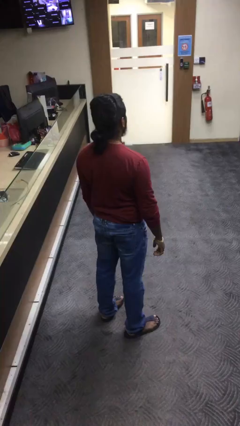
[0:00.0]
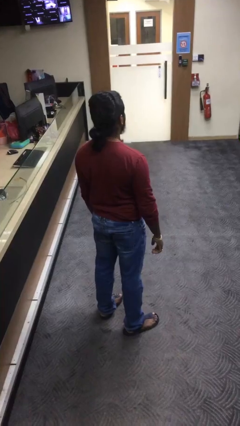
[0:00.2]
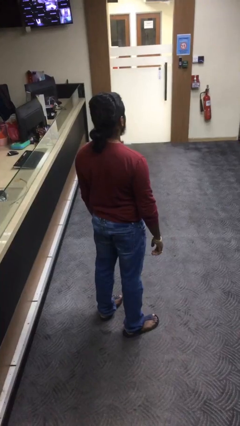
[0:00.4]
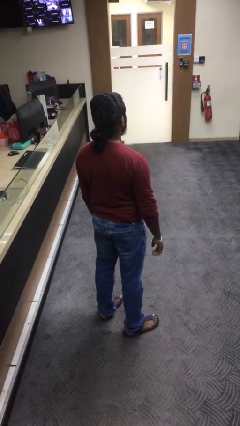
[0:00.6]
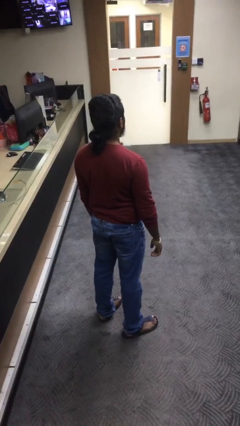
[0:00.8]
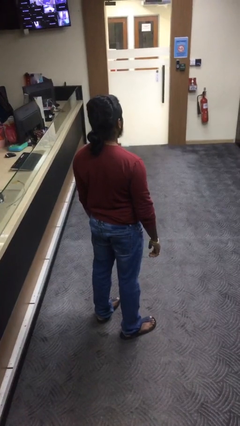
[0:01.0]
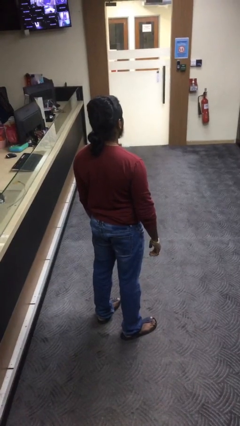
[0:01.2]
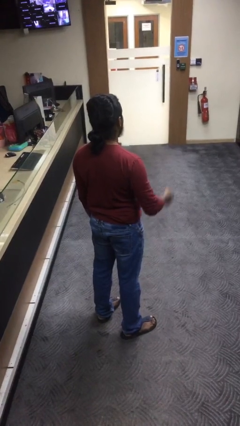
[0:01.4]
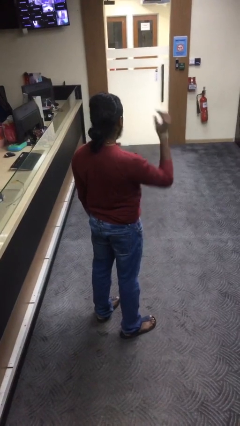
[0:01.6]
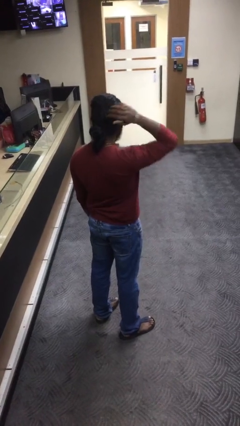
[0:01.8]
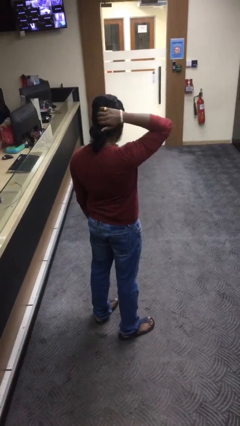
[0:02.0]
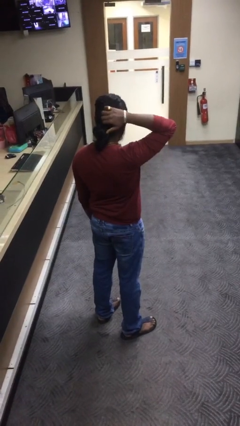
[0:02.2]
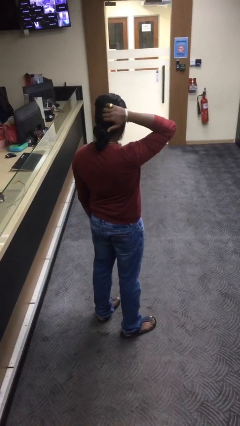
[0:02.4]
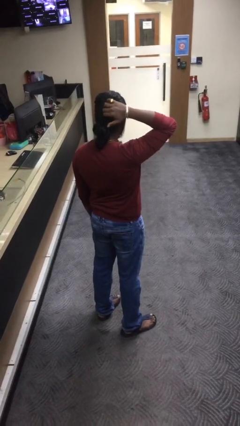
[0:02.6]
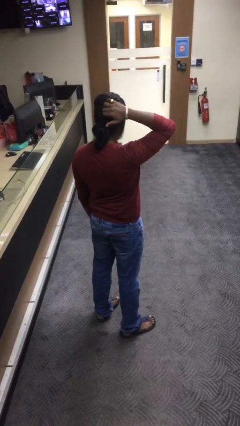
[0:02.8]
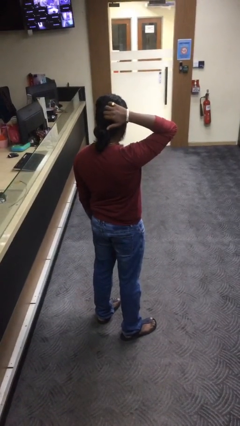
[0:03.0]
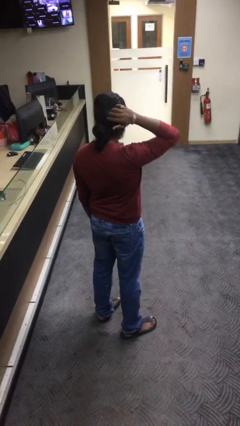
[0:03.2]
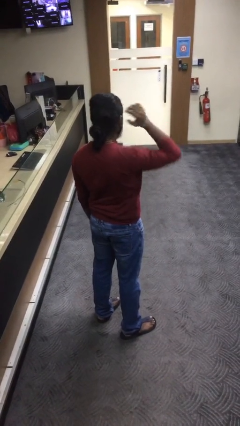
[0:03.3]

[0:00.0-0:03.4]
person scratches face

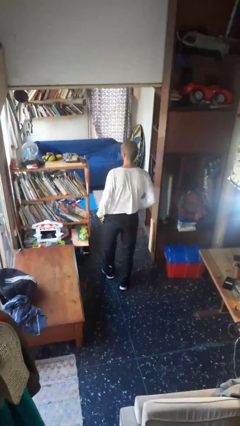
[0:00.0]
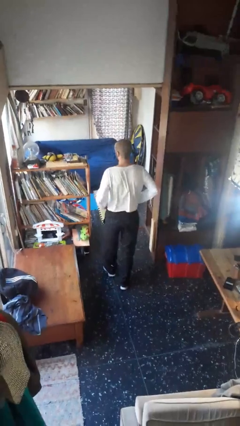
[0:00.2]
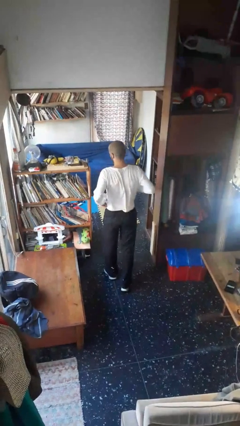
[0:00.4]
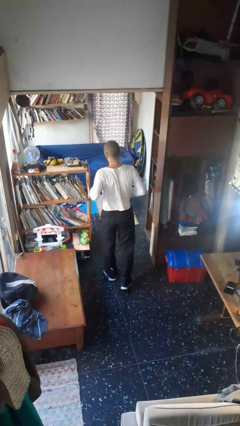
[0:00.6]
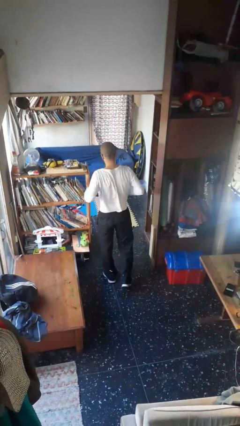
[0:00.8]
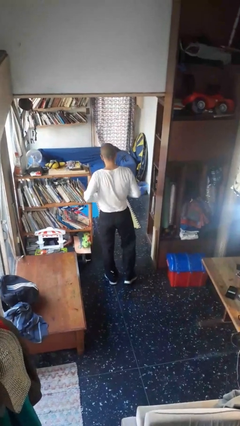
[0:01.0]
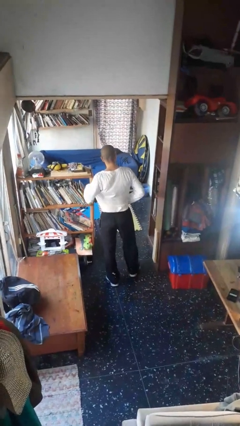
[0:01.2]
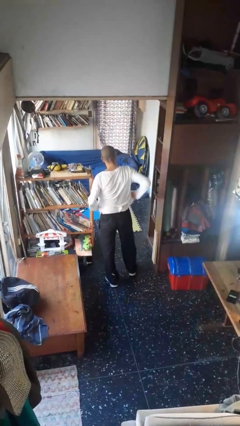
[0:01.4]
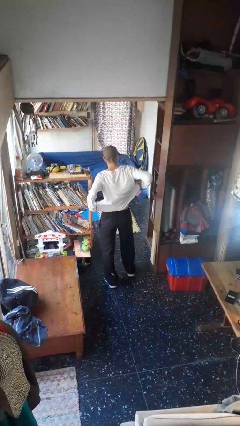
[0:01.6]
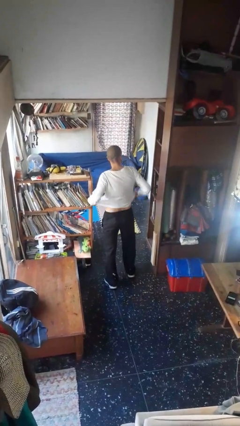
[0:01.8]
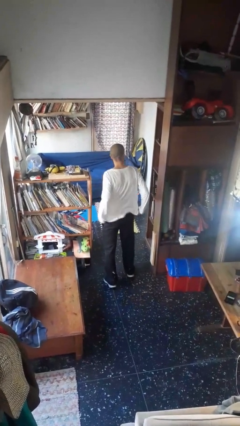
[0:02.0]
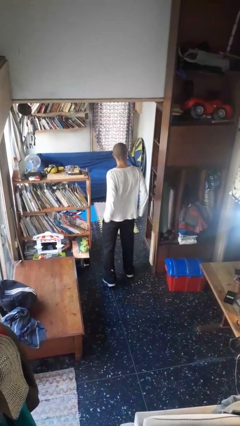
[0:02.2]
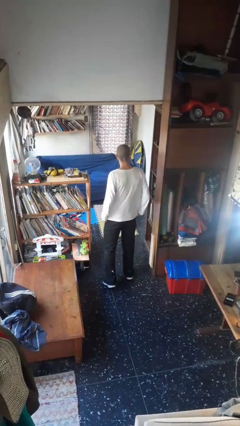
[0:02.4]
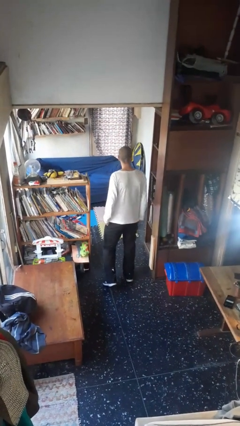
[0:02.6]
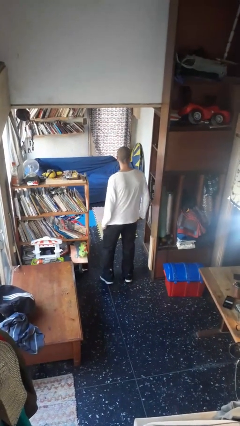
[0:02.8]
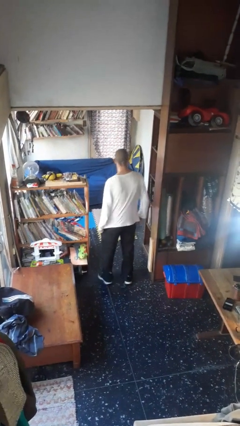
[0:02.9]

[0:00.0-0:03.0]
person untucks shirt

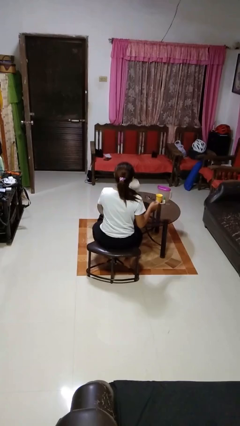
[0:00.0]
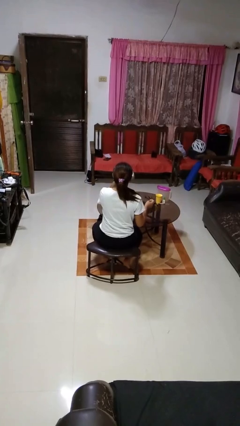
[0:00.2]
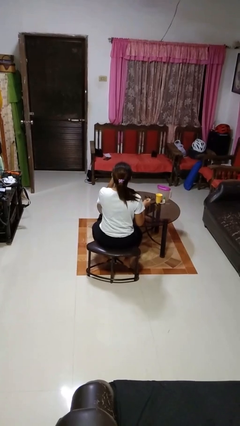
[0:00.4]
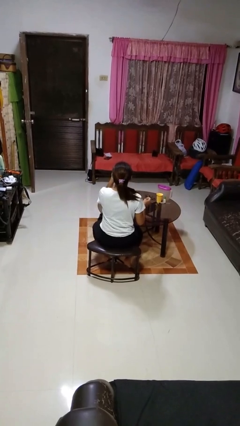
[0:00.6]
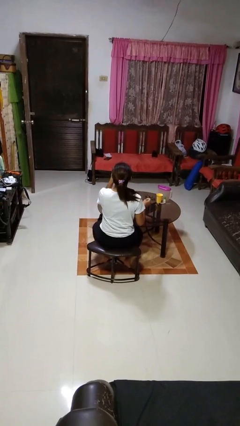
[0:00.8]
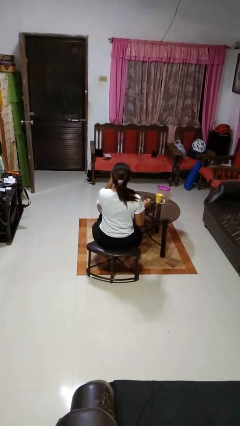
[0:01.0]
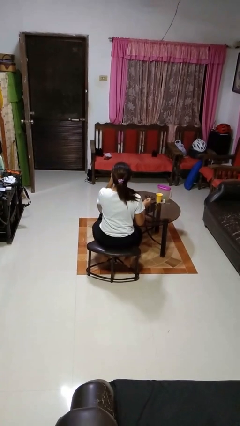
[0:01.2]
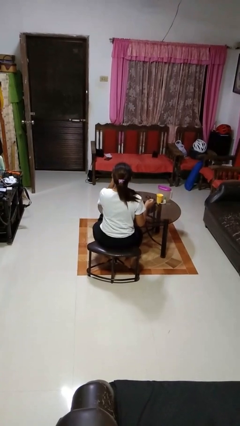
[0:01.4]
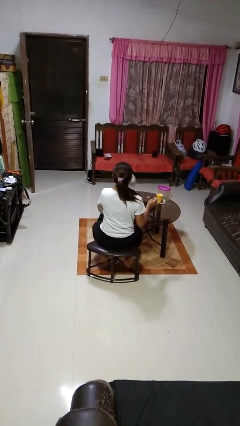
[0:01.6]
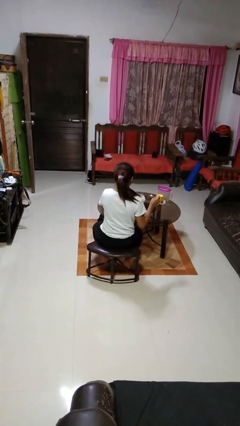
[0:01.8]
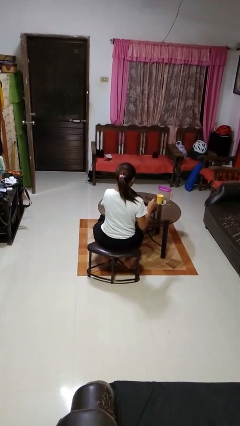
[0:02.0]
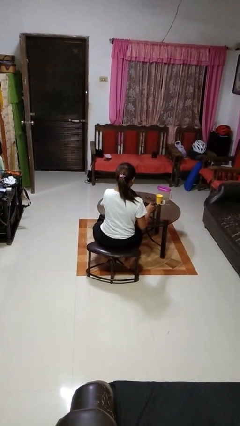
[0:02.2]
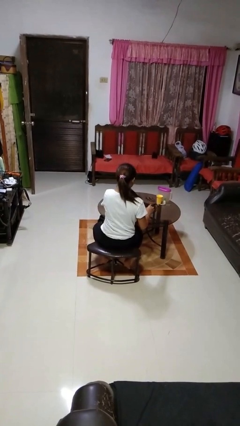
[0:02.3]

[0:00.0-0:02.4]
person drinks from mug

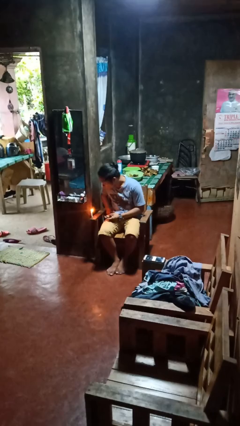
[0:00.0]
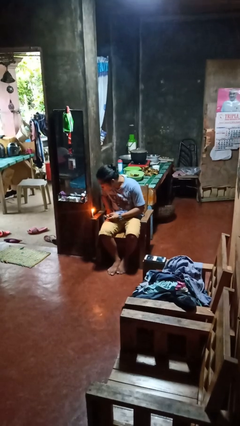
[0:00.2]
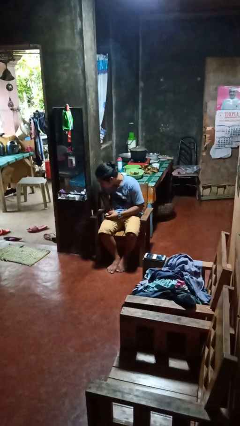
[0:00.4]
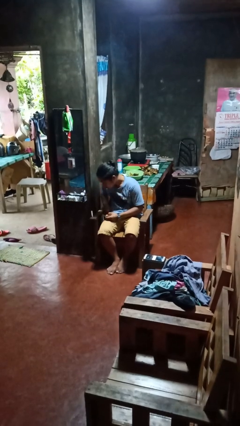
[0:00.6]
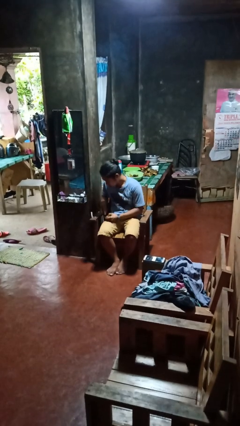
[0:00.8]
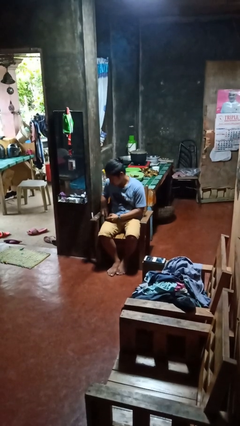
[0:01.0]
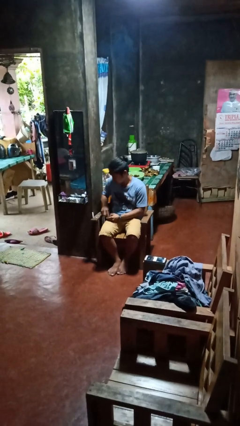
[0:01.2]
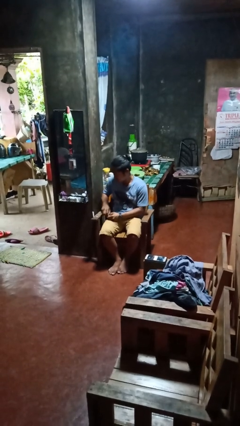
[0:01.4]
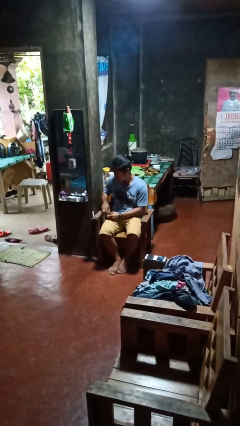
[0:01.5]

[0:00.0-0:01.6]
person extinguishes candle

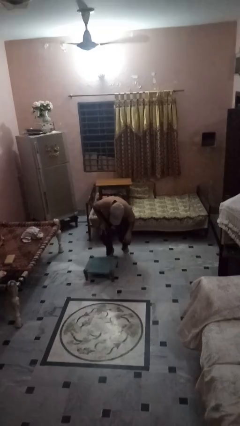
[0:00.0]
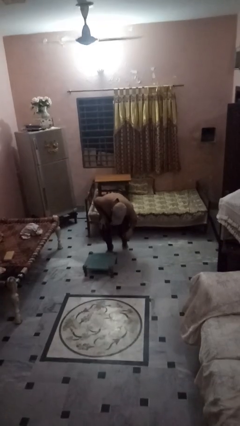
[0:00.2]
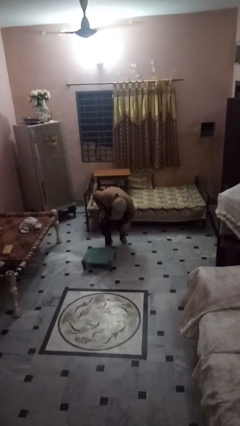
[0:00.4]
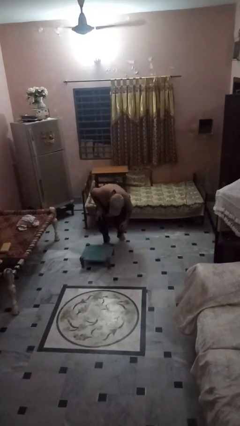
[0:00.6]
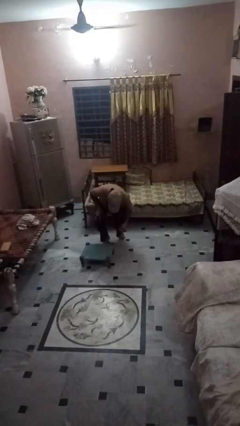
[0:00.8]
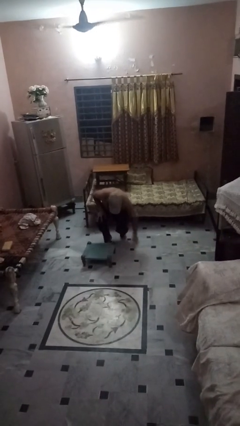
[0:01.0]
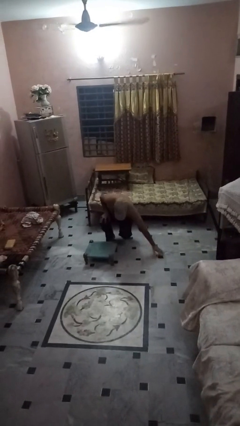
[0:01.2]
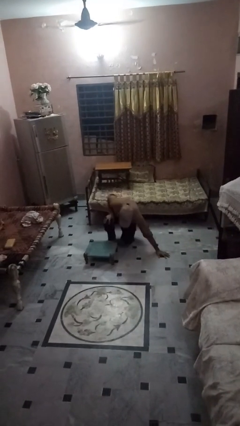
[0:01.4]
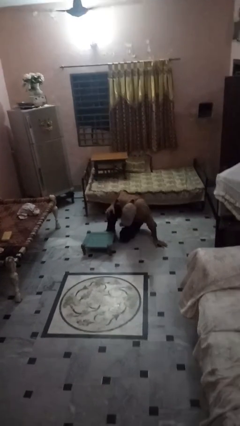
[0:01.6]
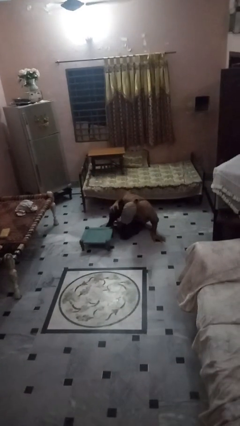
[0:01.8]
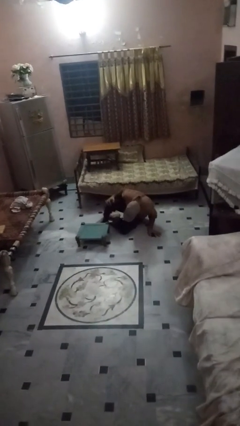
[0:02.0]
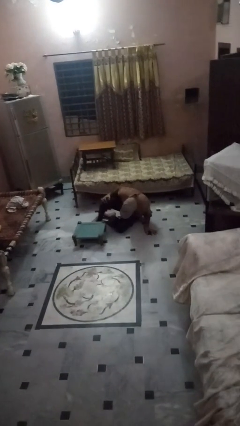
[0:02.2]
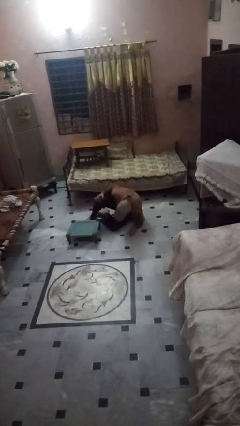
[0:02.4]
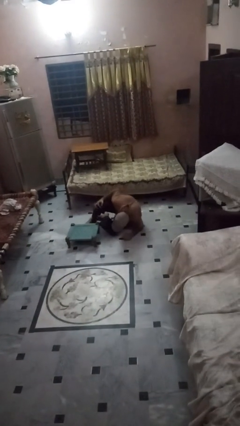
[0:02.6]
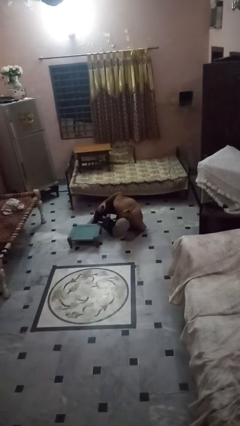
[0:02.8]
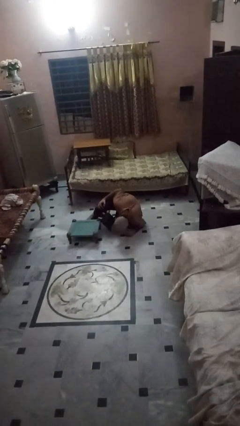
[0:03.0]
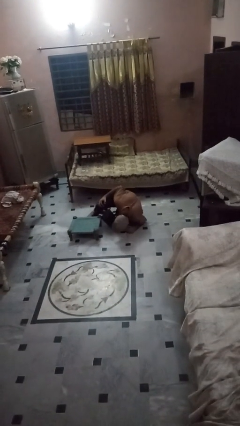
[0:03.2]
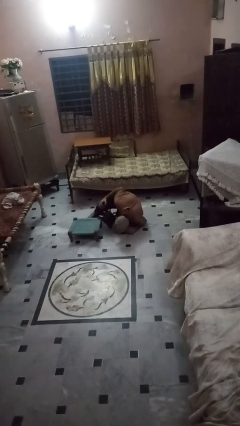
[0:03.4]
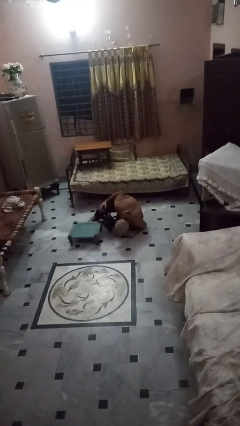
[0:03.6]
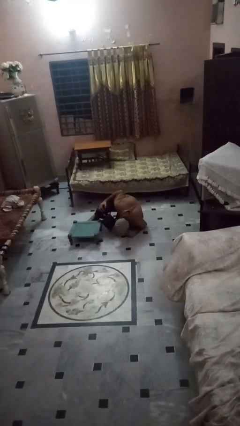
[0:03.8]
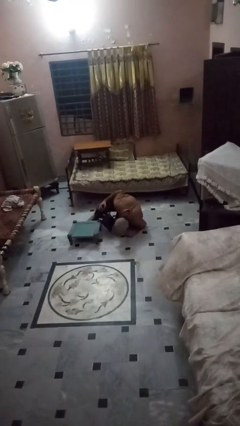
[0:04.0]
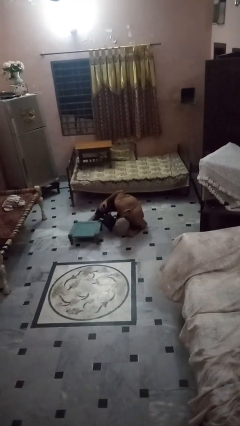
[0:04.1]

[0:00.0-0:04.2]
person lies down on floor

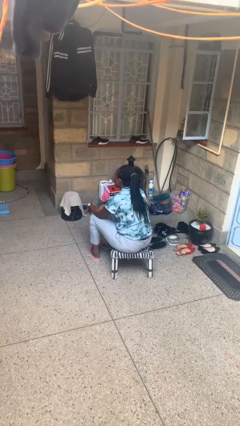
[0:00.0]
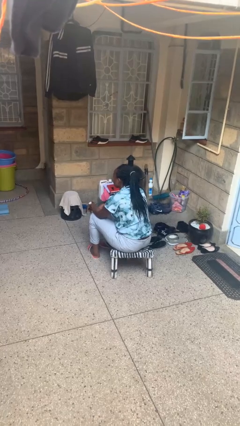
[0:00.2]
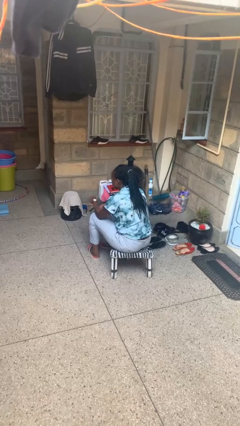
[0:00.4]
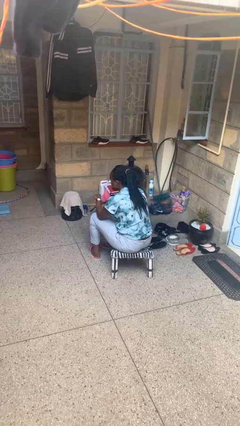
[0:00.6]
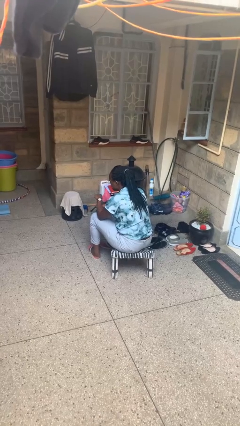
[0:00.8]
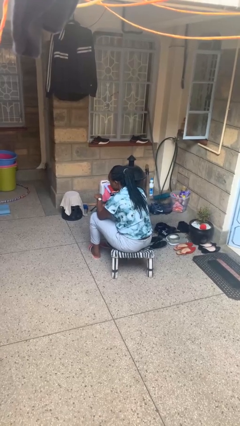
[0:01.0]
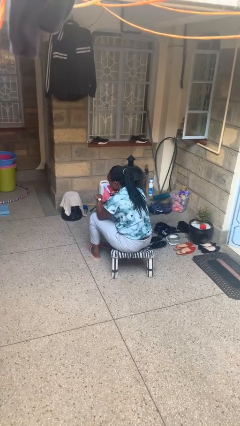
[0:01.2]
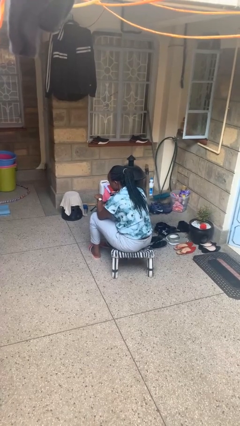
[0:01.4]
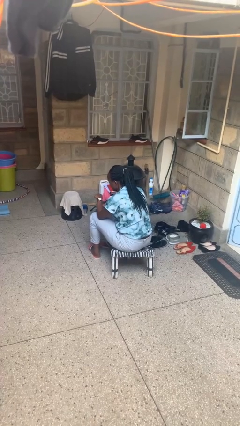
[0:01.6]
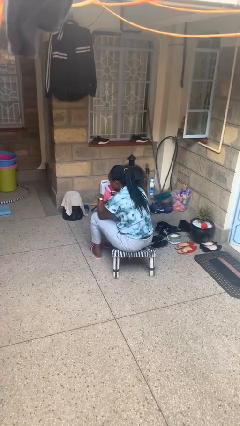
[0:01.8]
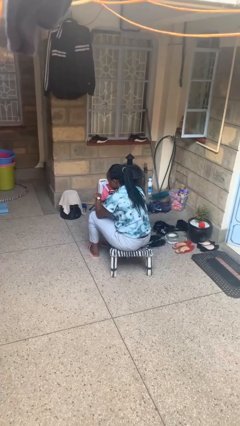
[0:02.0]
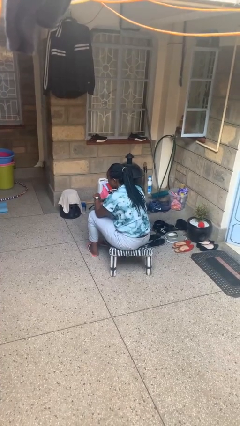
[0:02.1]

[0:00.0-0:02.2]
person looks at wristwatch

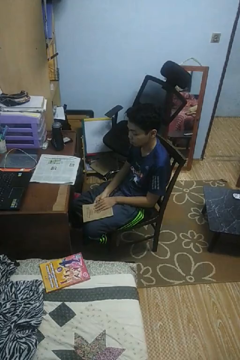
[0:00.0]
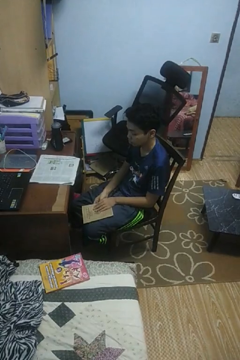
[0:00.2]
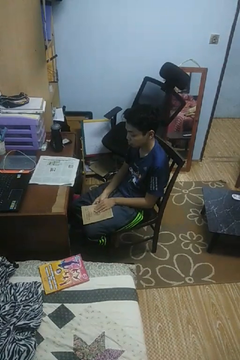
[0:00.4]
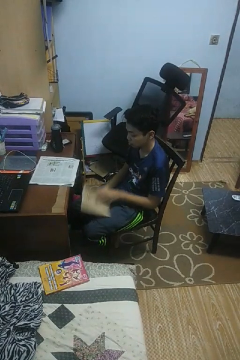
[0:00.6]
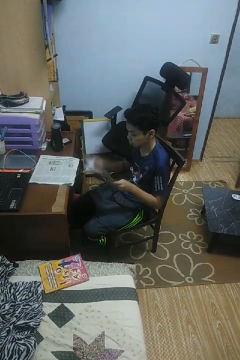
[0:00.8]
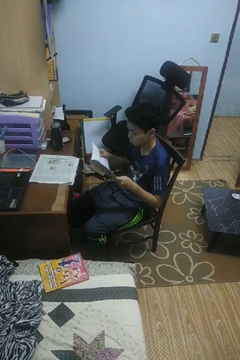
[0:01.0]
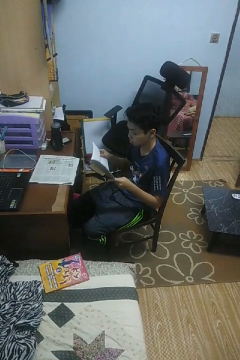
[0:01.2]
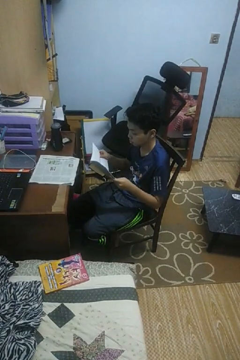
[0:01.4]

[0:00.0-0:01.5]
person reads book
